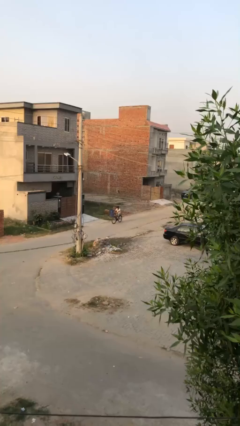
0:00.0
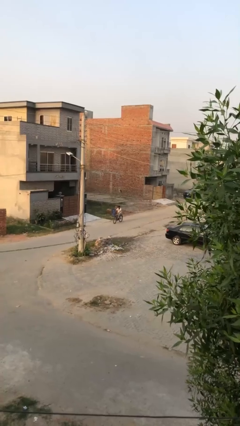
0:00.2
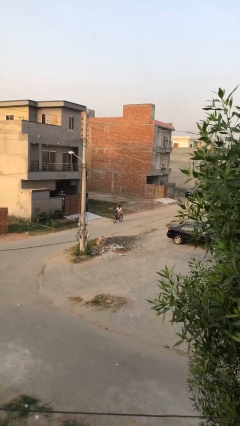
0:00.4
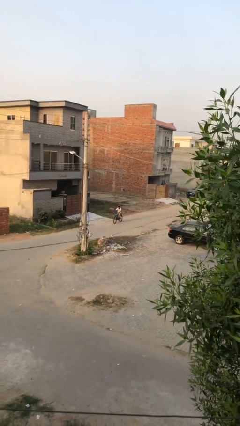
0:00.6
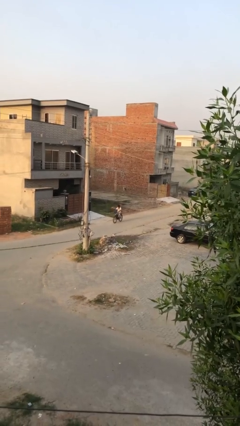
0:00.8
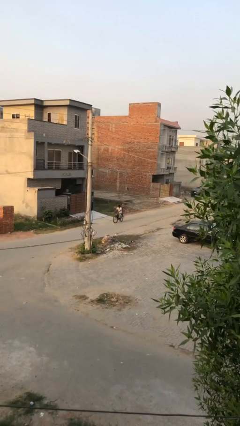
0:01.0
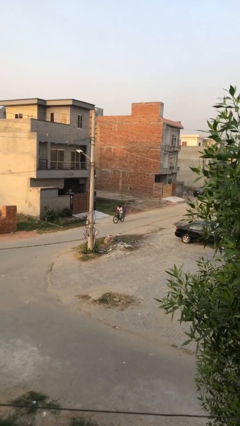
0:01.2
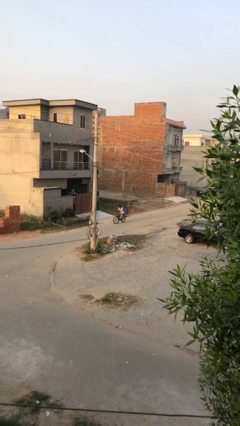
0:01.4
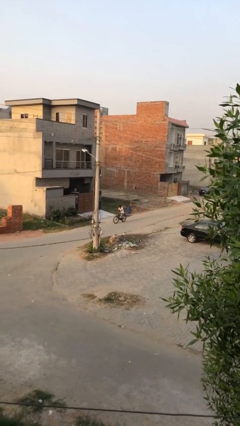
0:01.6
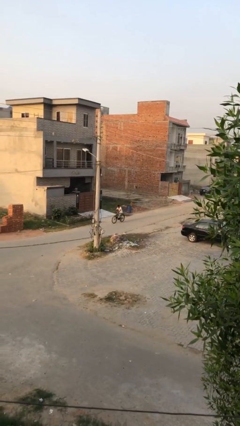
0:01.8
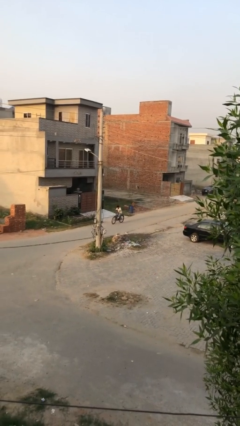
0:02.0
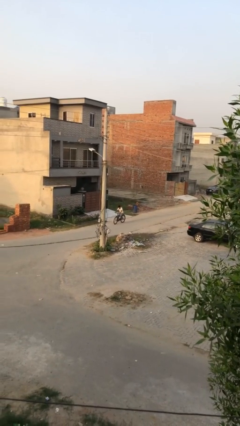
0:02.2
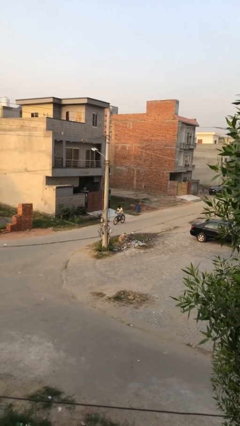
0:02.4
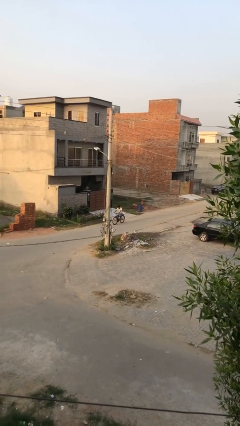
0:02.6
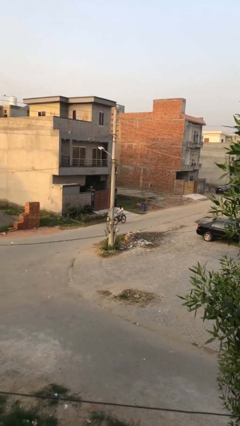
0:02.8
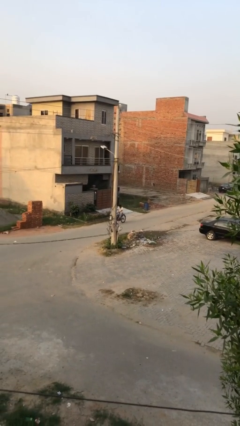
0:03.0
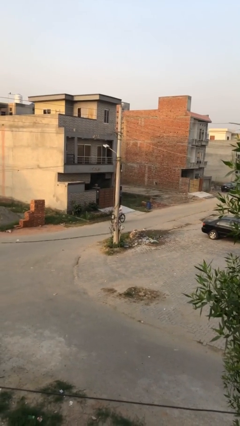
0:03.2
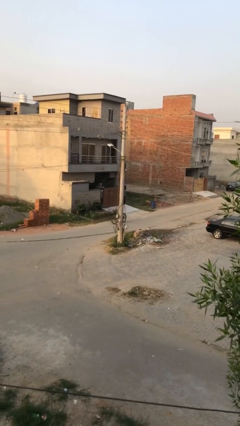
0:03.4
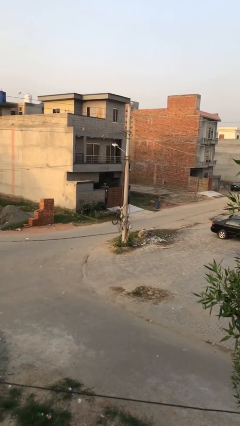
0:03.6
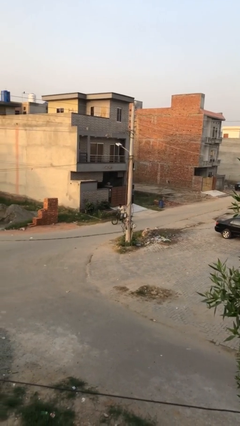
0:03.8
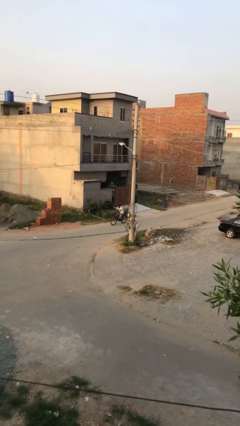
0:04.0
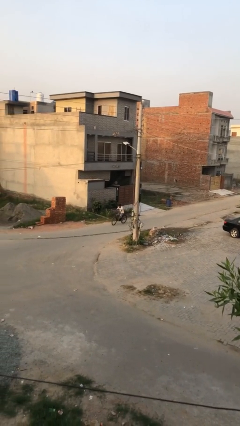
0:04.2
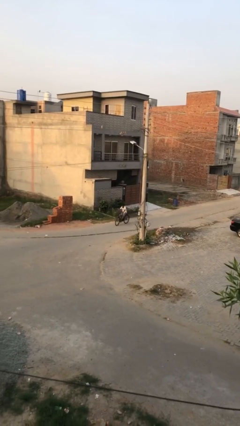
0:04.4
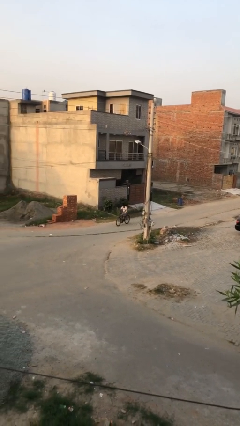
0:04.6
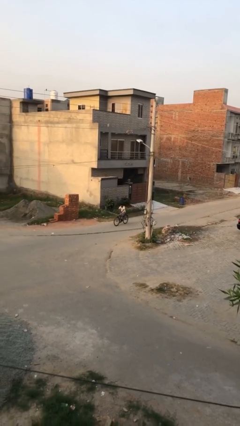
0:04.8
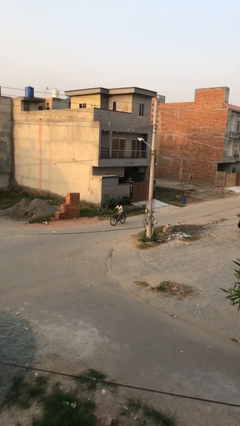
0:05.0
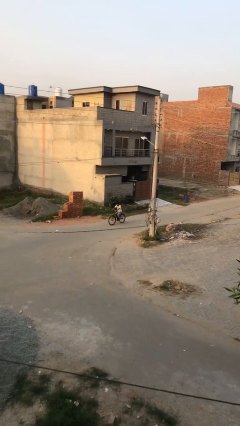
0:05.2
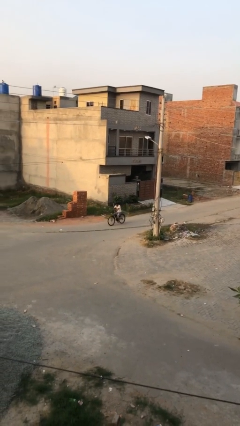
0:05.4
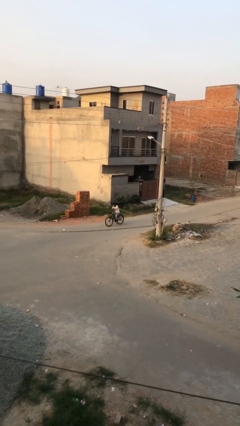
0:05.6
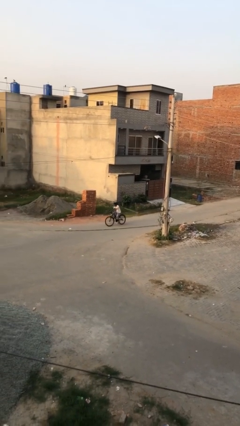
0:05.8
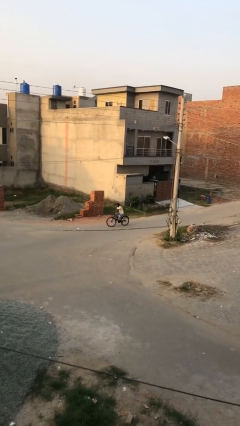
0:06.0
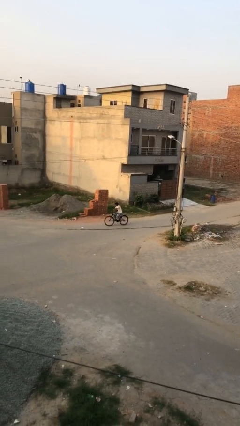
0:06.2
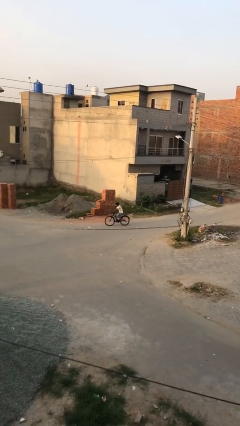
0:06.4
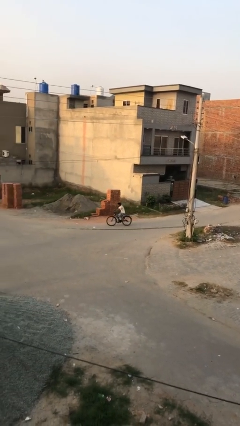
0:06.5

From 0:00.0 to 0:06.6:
person rides bicycle

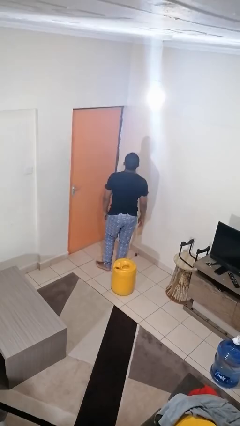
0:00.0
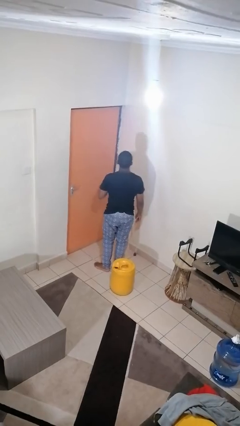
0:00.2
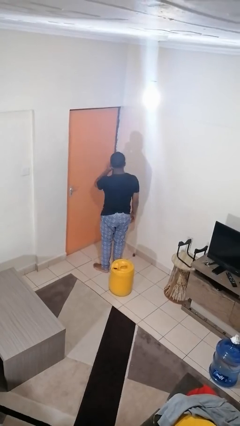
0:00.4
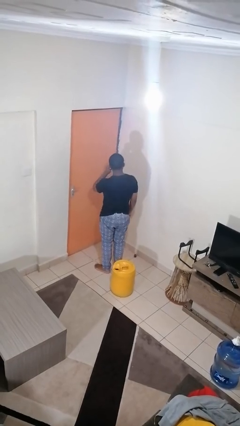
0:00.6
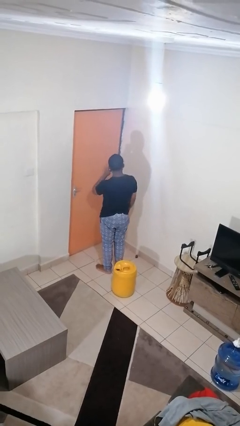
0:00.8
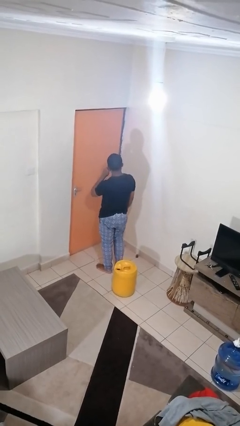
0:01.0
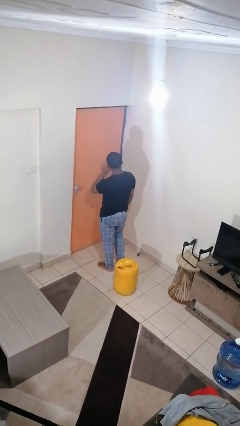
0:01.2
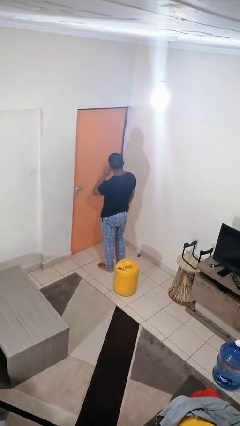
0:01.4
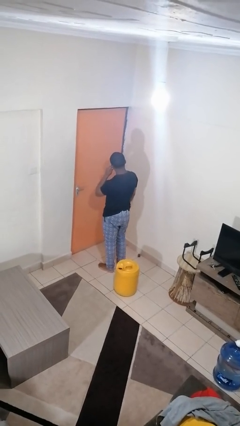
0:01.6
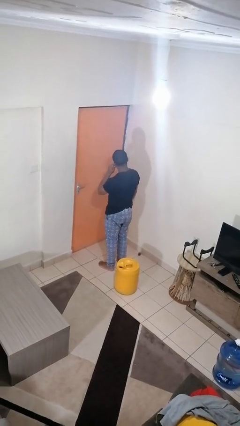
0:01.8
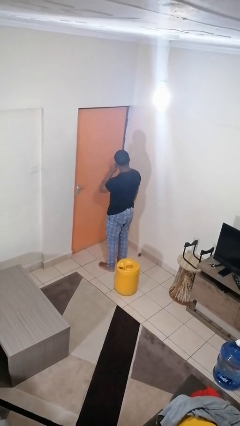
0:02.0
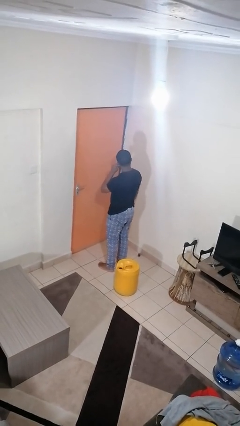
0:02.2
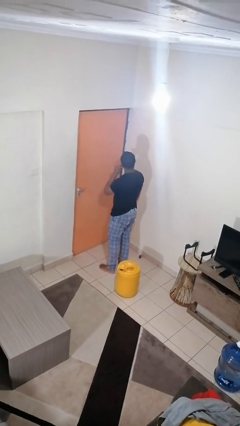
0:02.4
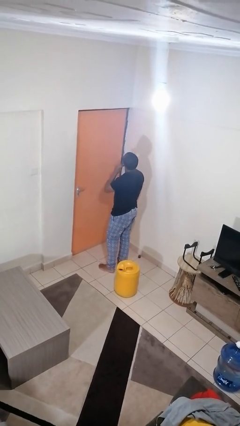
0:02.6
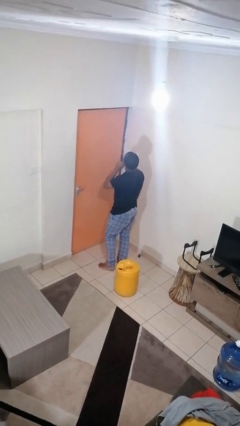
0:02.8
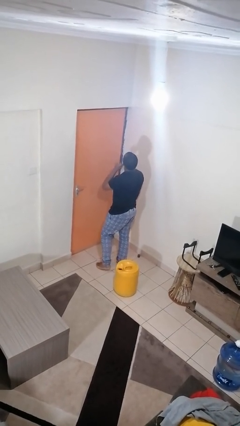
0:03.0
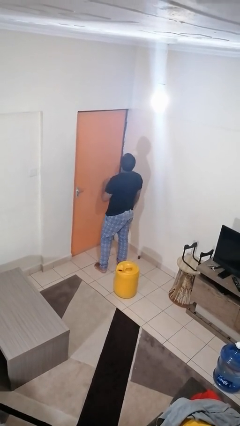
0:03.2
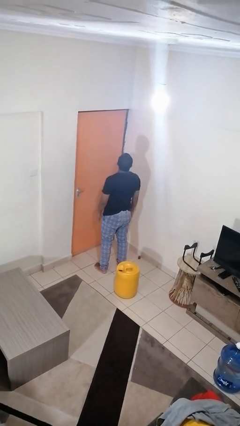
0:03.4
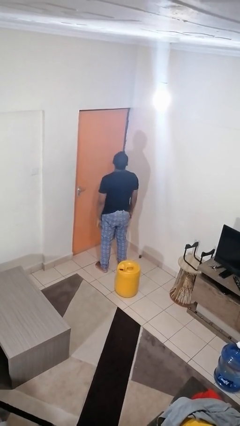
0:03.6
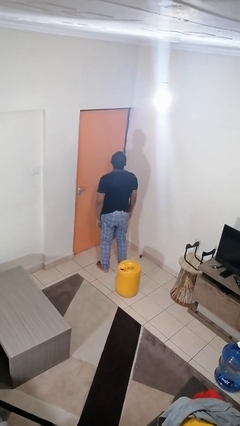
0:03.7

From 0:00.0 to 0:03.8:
person touches earlobe

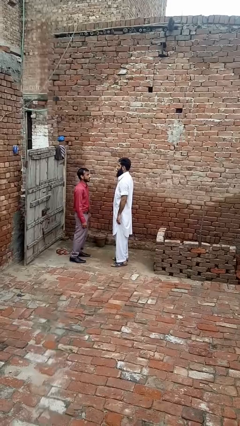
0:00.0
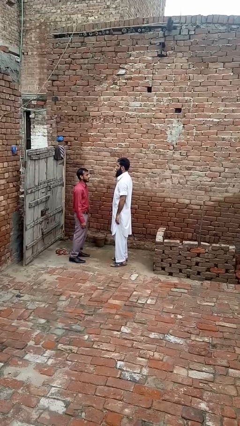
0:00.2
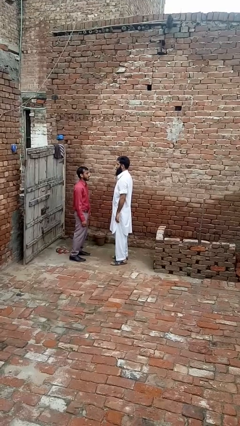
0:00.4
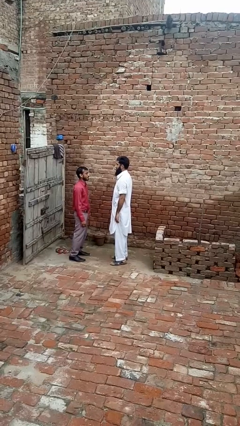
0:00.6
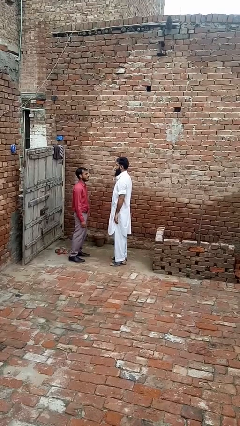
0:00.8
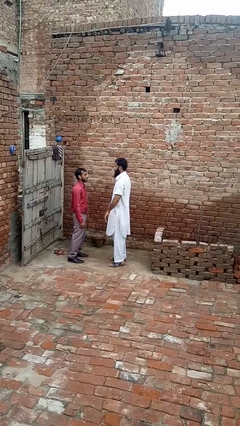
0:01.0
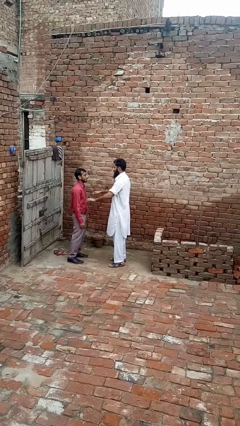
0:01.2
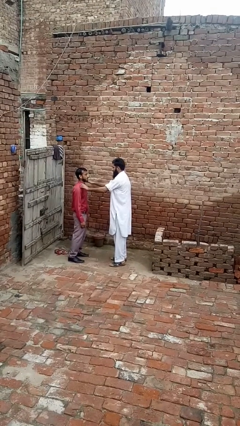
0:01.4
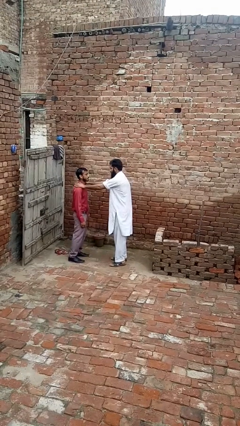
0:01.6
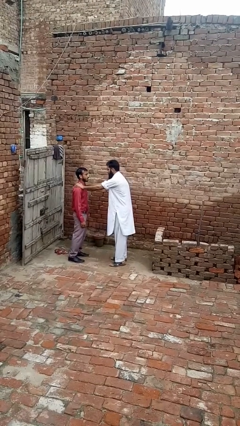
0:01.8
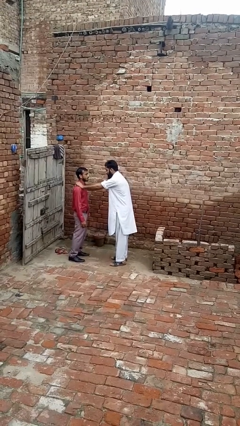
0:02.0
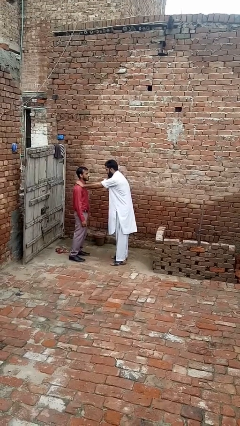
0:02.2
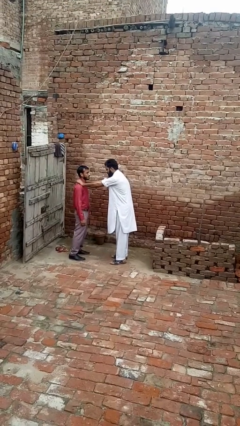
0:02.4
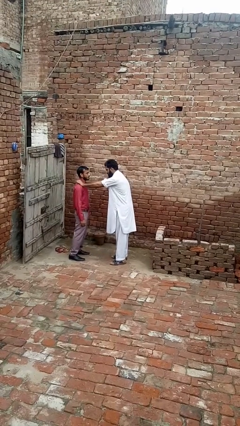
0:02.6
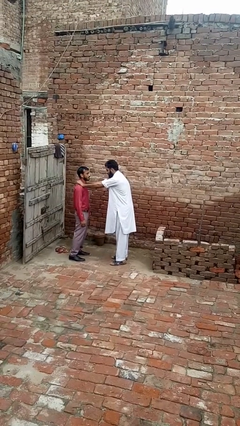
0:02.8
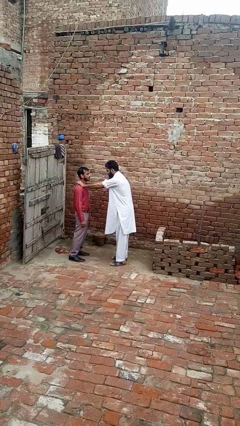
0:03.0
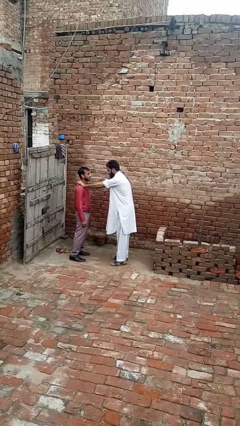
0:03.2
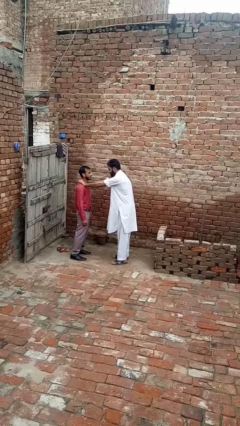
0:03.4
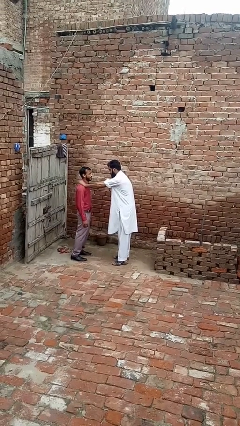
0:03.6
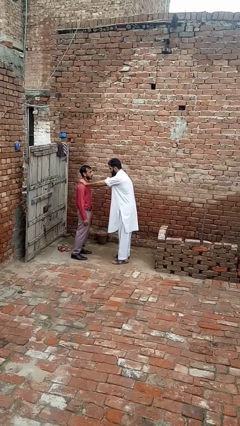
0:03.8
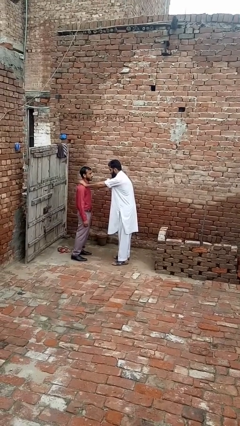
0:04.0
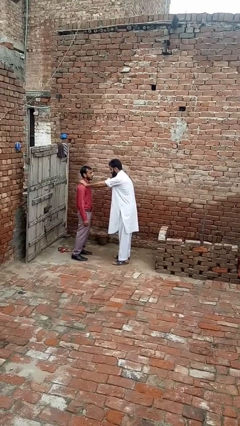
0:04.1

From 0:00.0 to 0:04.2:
person pounds shoulders of person

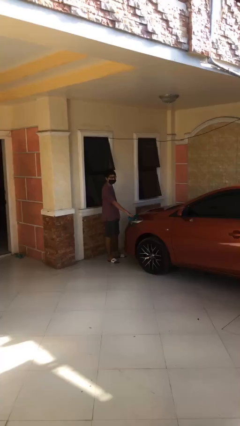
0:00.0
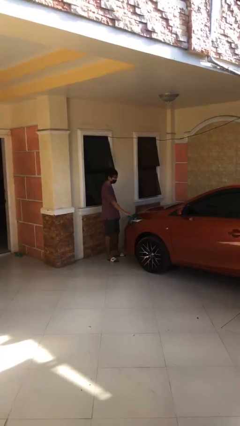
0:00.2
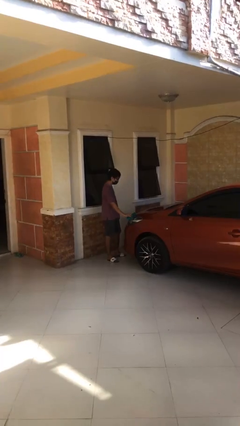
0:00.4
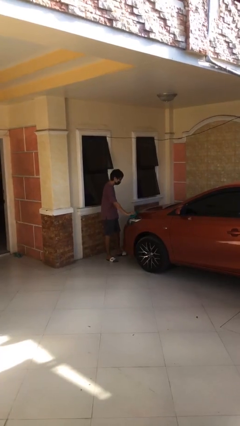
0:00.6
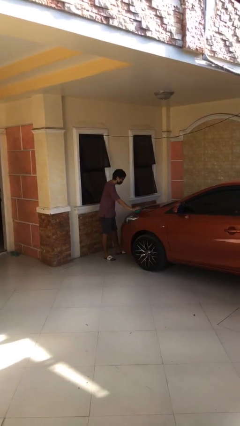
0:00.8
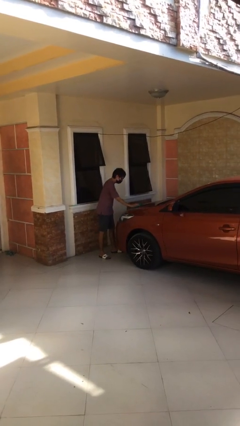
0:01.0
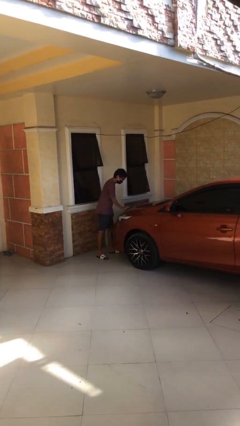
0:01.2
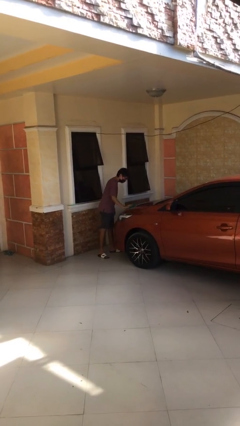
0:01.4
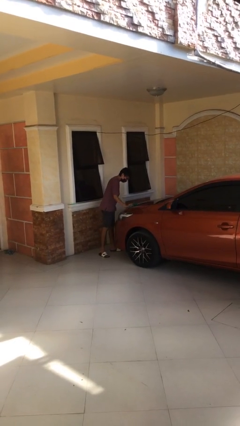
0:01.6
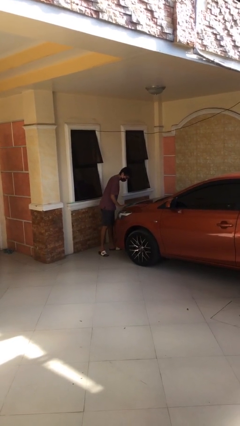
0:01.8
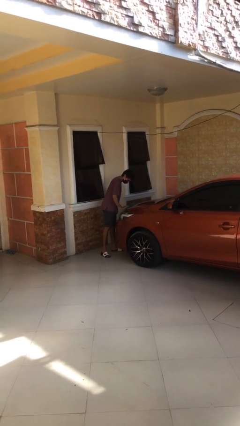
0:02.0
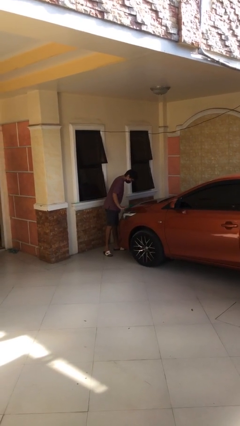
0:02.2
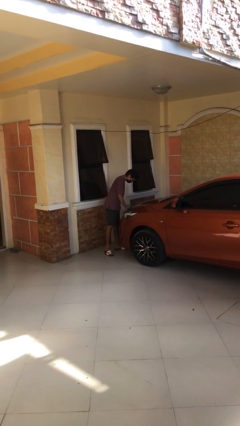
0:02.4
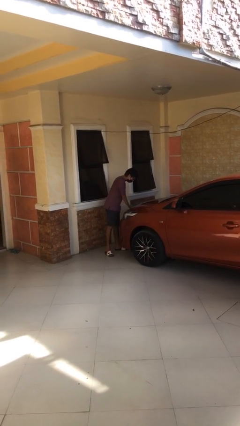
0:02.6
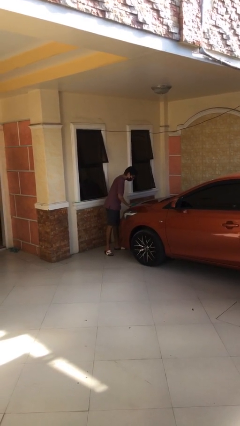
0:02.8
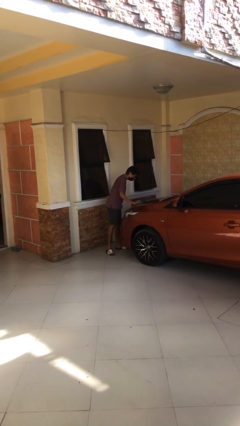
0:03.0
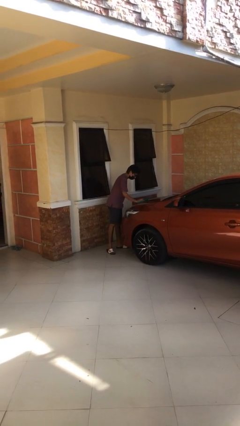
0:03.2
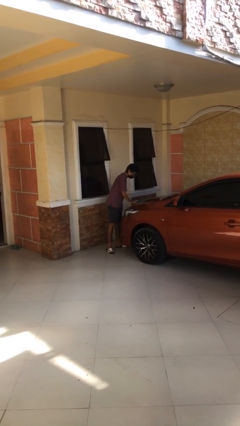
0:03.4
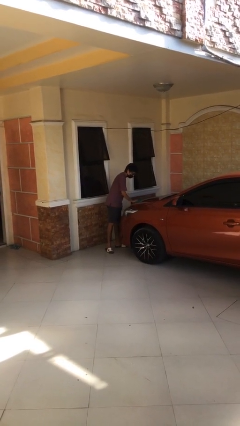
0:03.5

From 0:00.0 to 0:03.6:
person polishes car with rag
